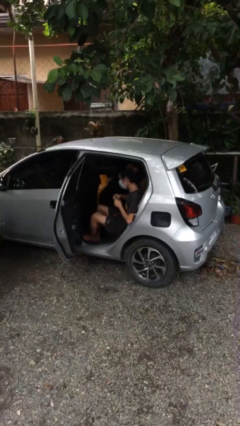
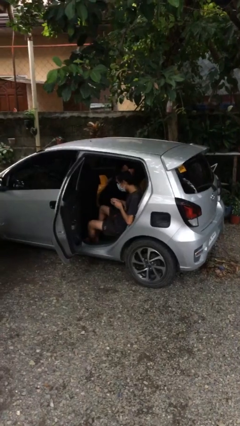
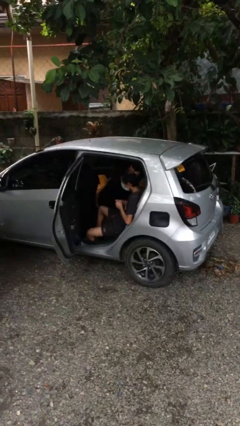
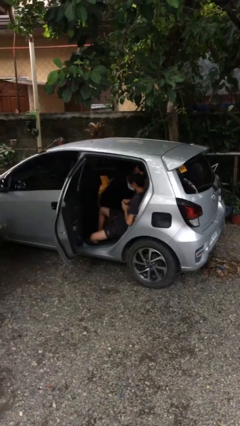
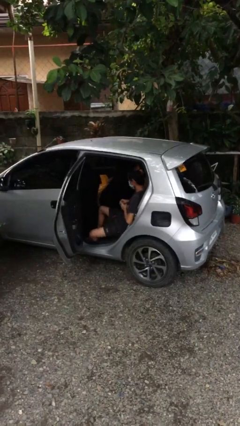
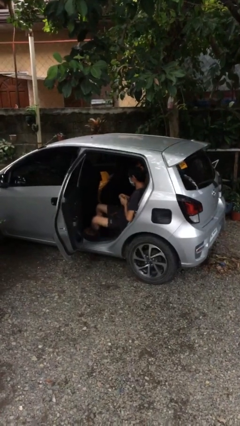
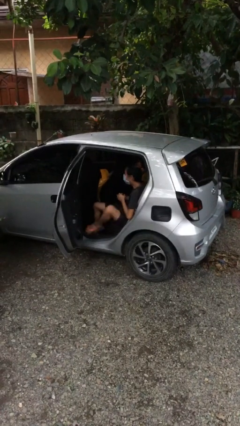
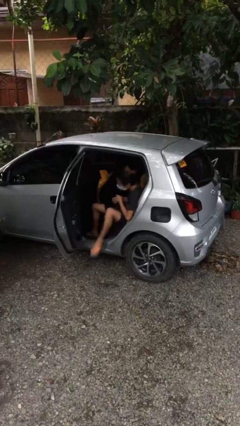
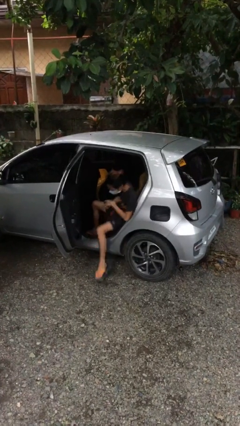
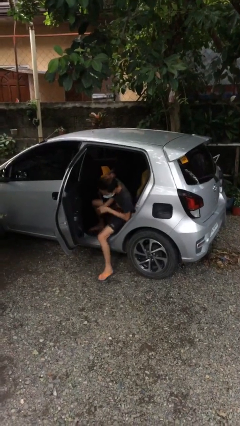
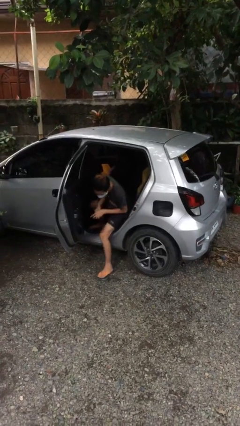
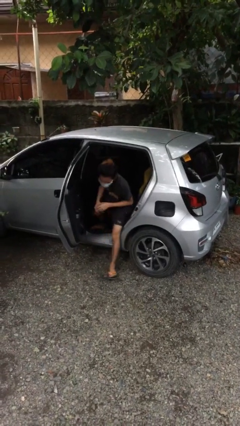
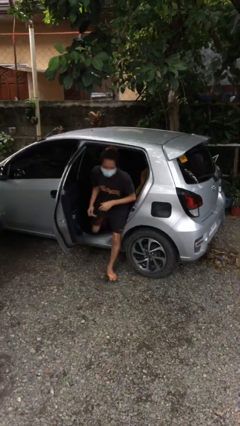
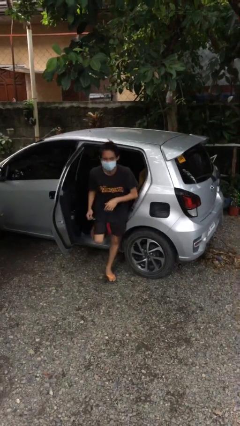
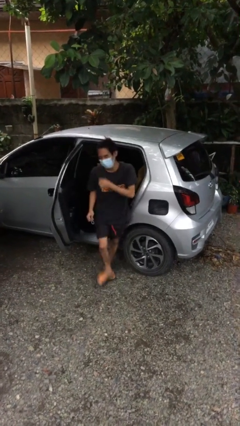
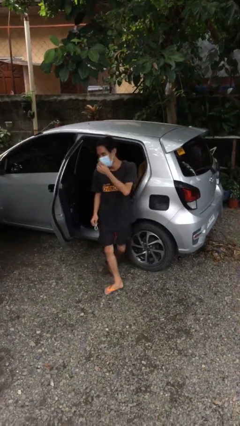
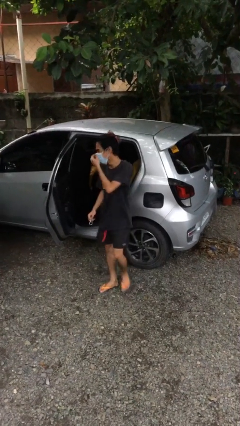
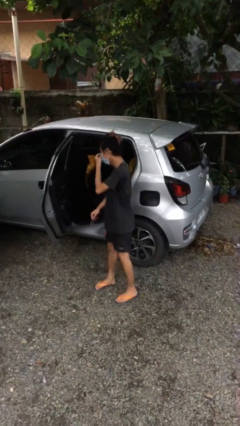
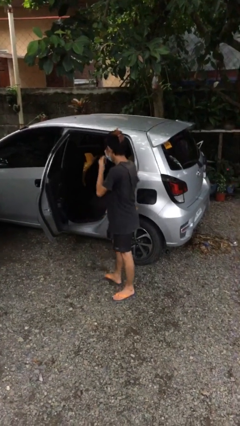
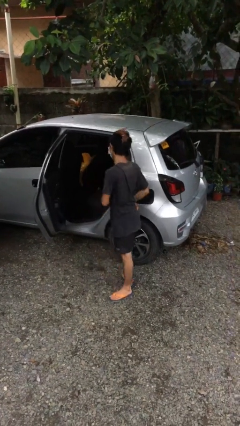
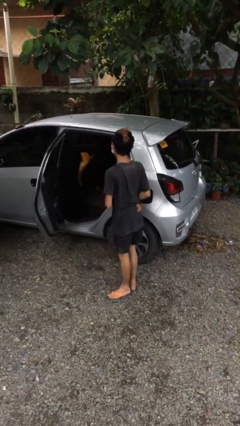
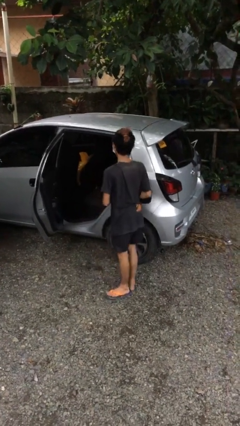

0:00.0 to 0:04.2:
person exits car

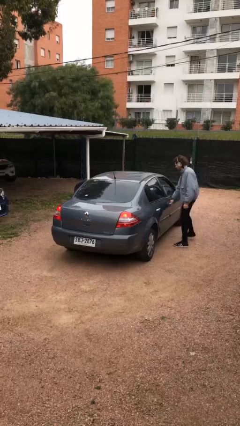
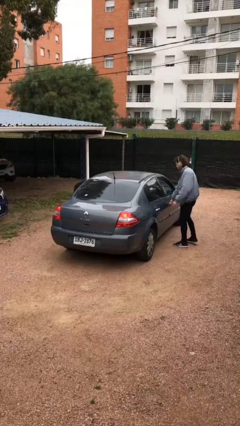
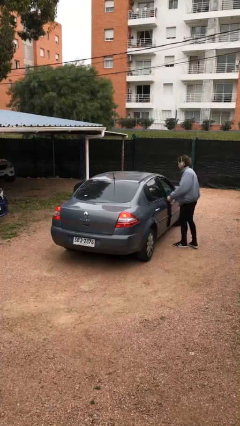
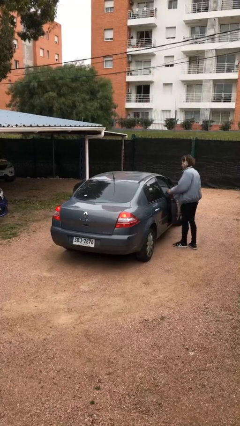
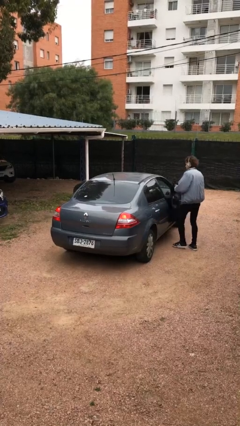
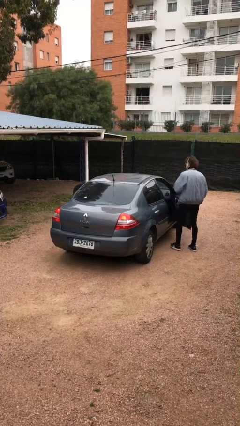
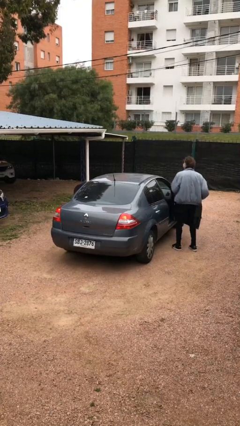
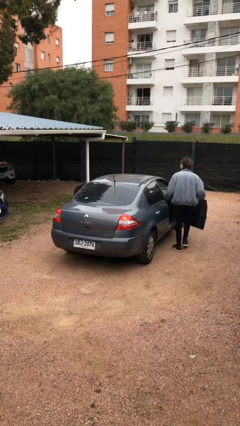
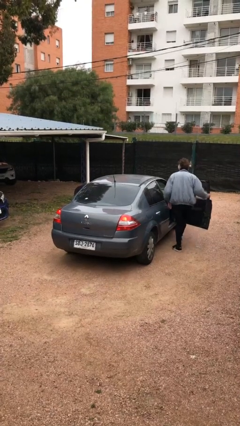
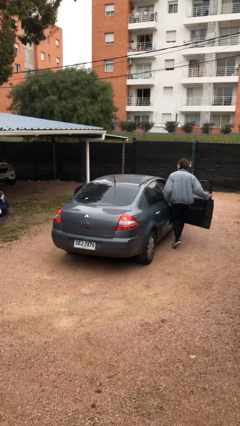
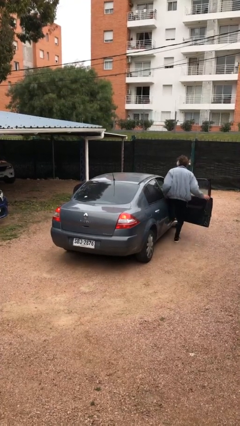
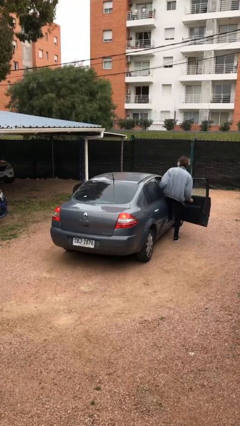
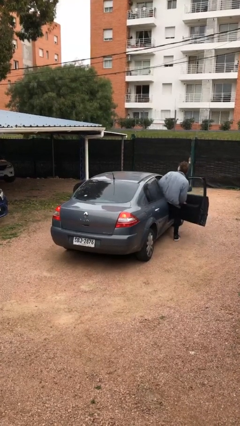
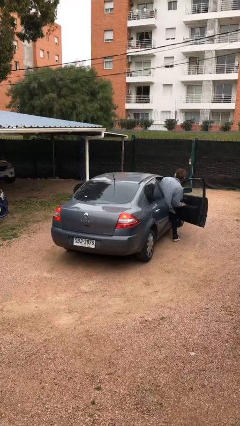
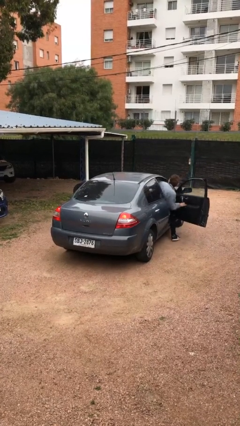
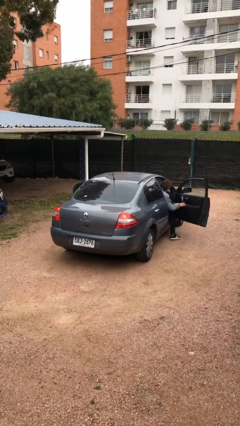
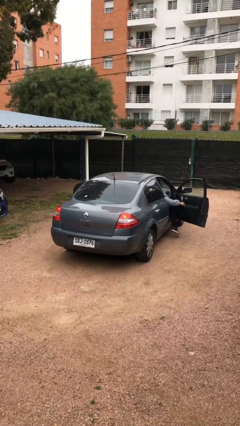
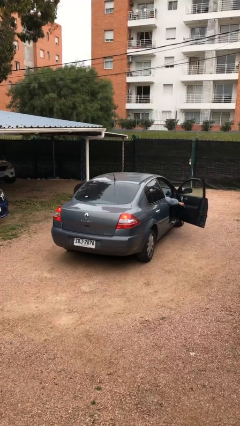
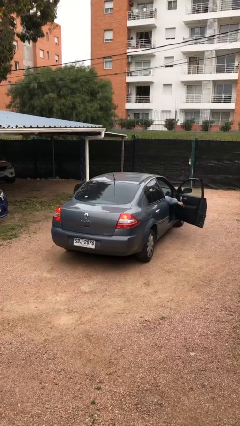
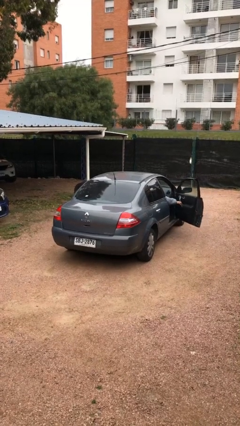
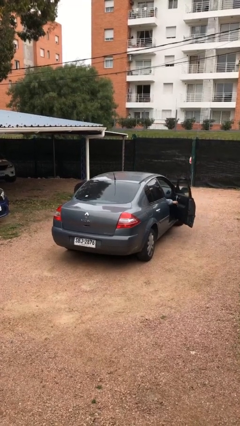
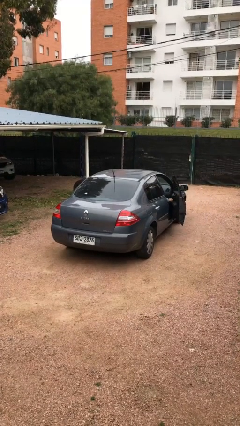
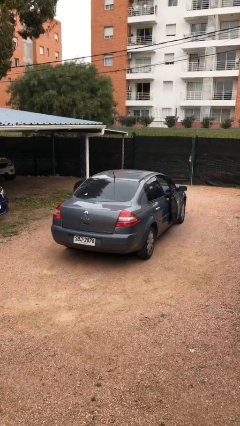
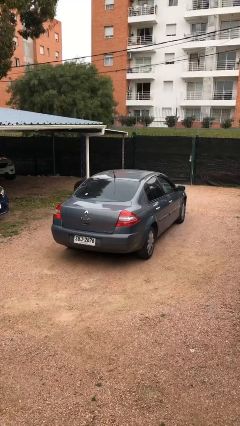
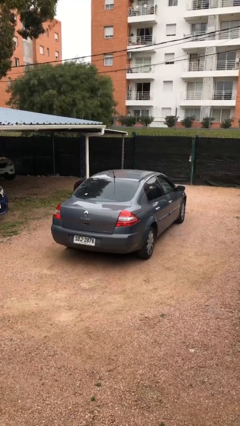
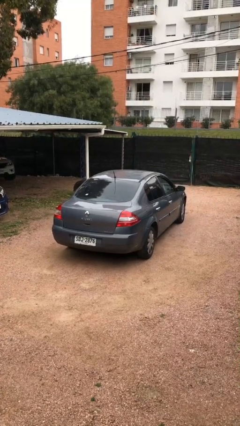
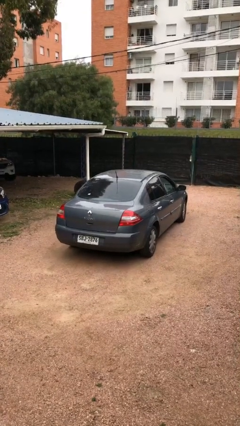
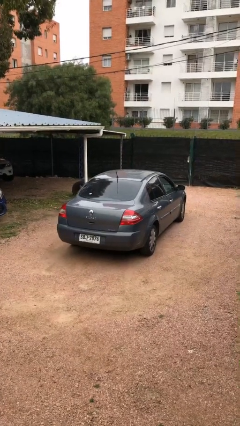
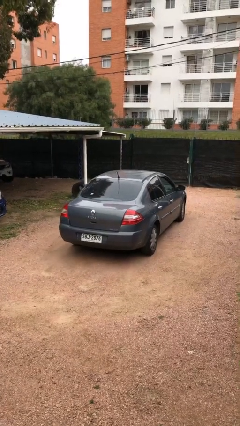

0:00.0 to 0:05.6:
car picks up person

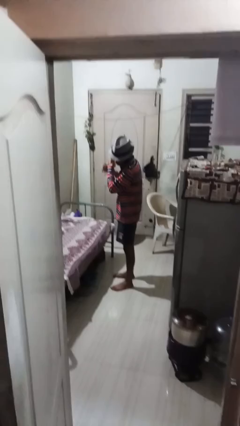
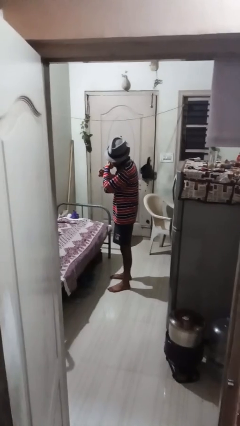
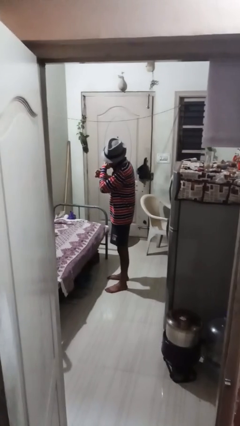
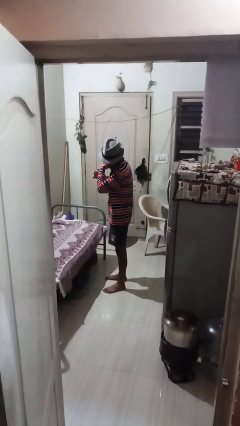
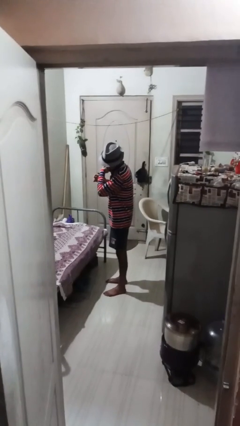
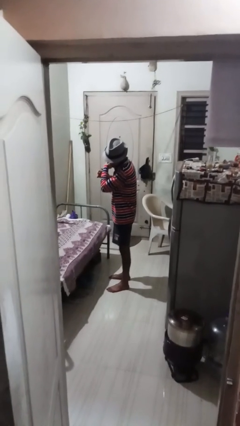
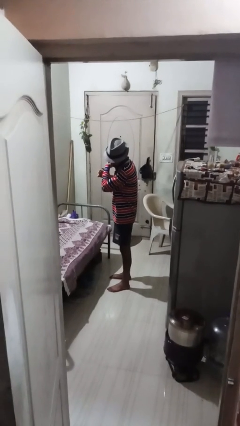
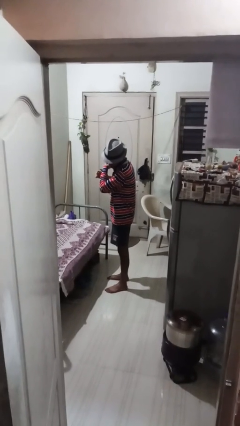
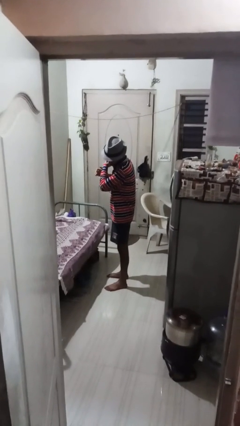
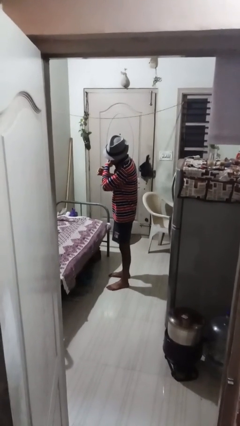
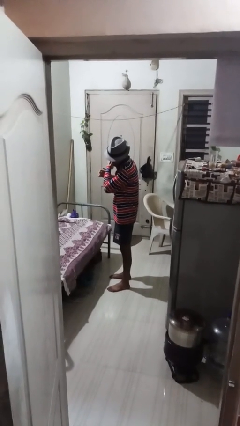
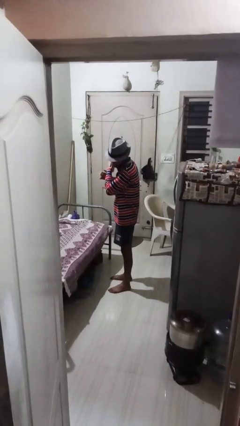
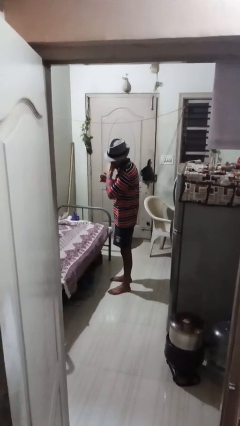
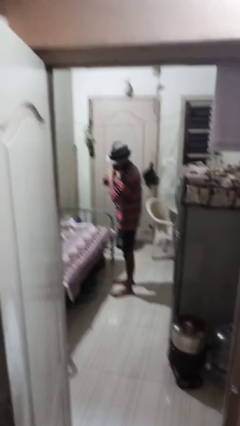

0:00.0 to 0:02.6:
person applies deodorant

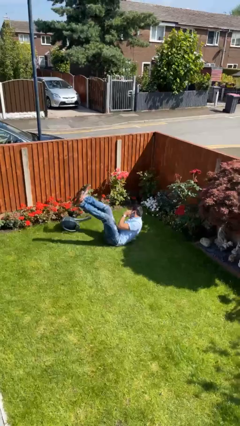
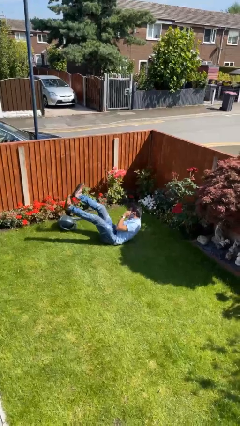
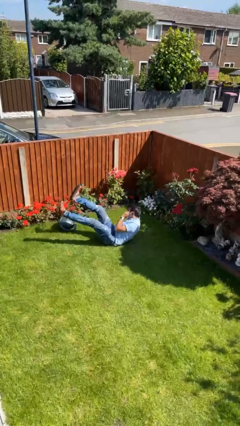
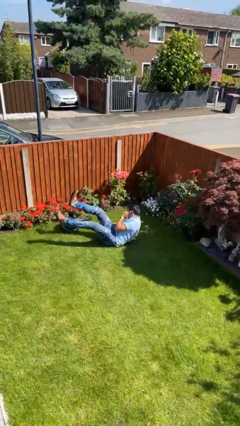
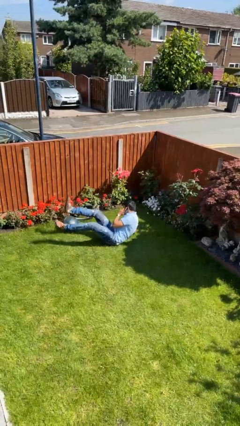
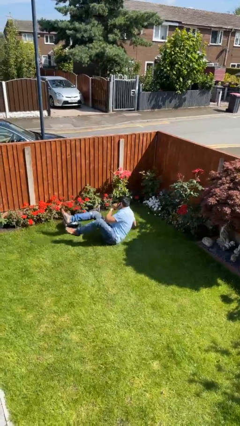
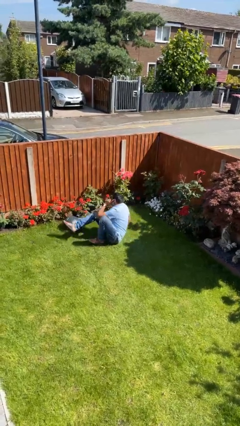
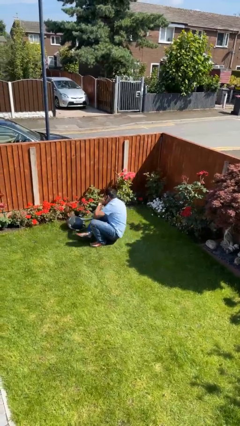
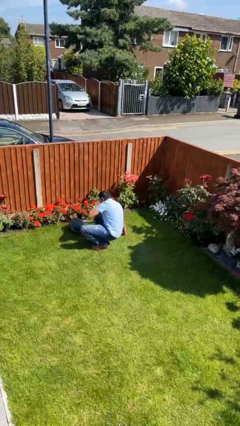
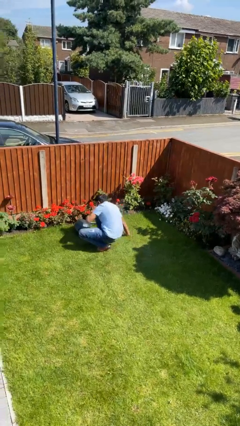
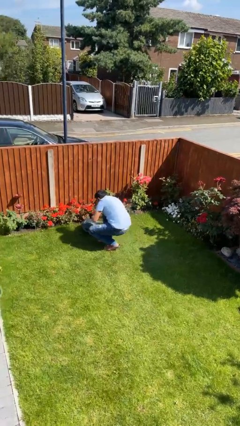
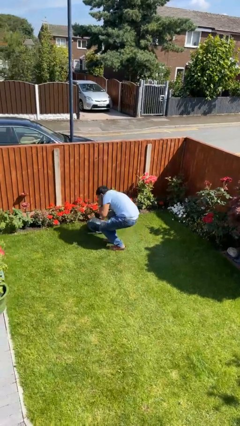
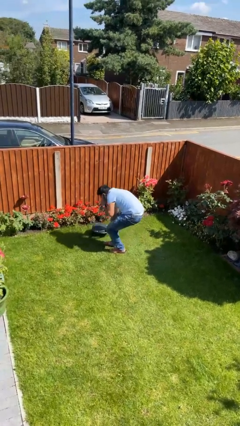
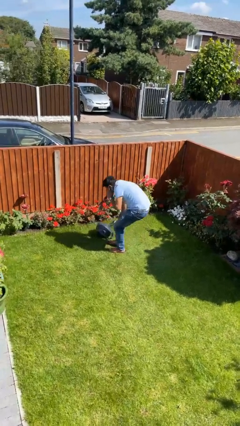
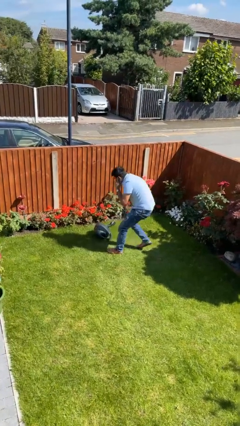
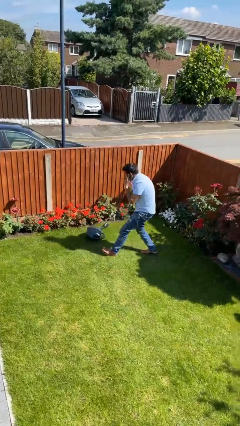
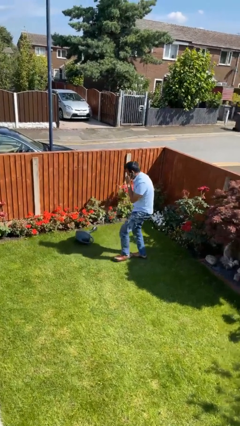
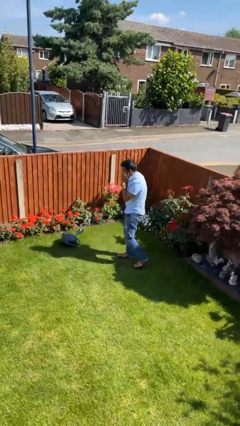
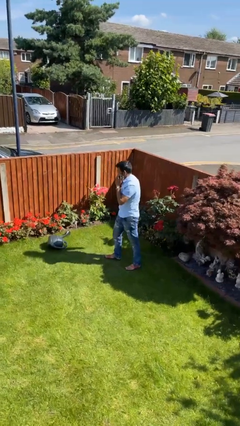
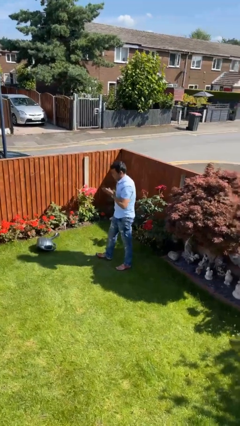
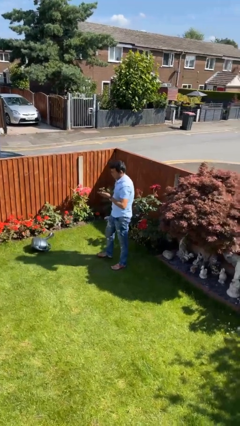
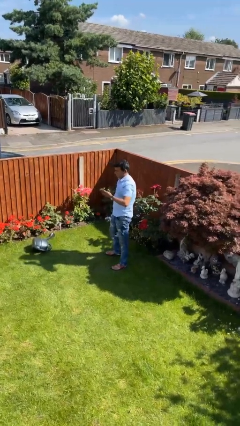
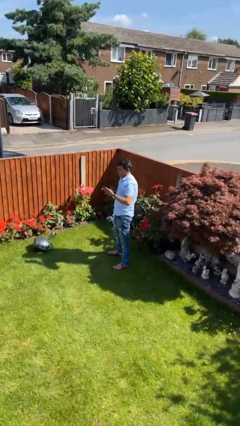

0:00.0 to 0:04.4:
person stands up from floor

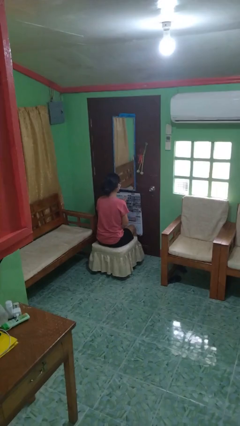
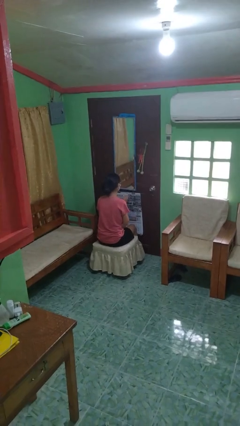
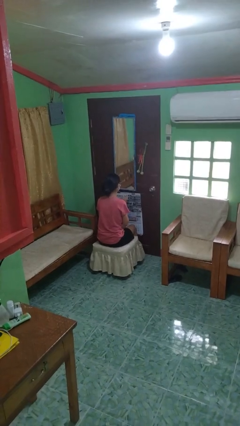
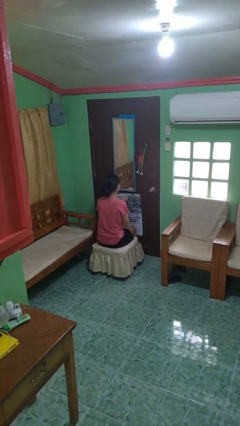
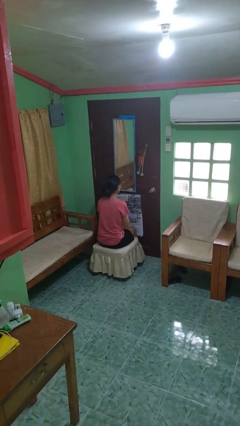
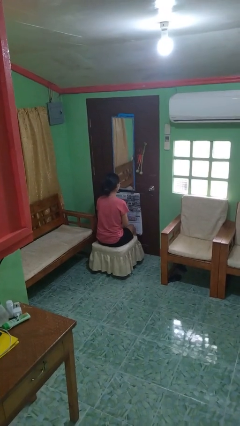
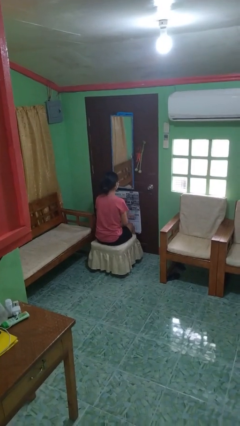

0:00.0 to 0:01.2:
person claps hands
